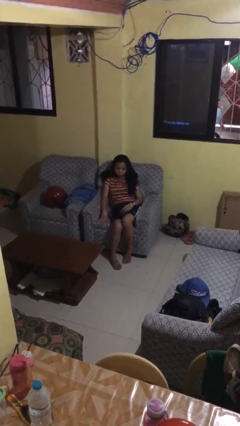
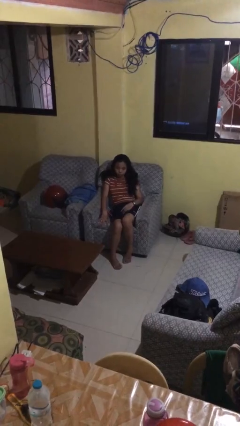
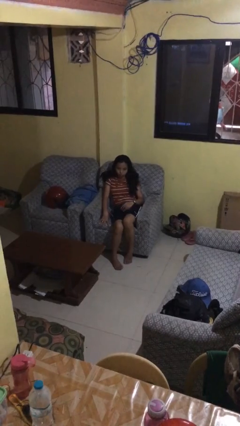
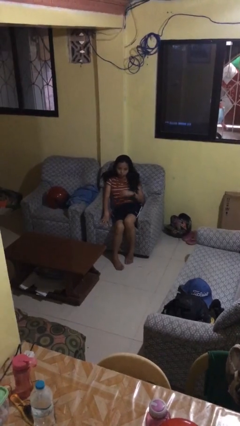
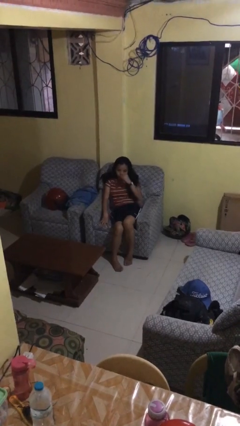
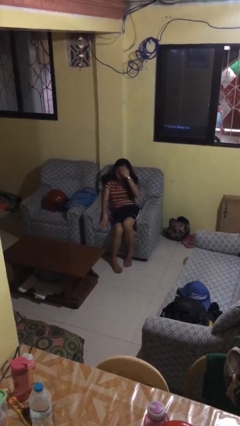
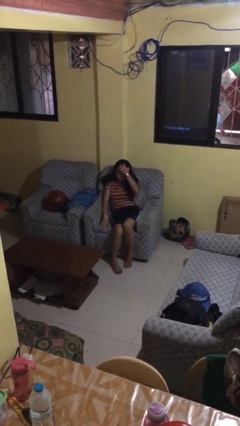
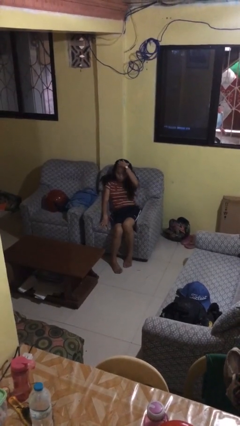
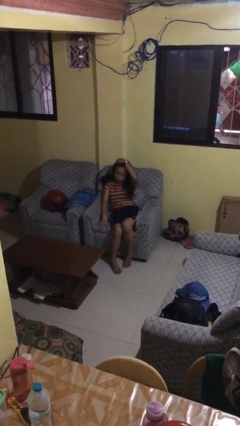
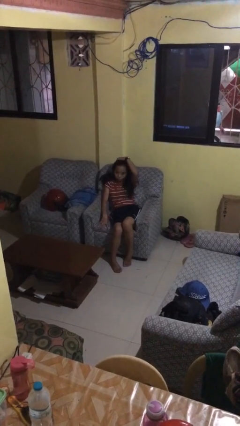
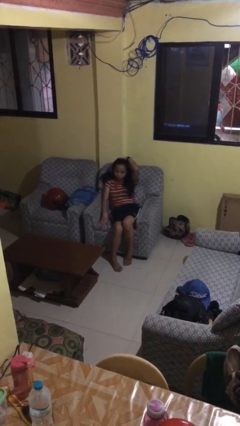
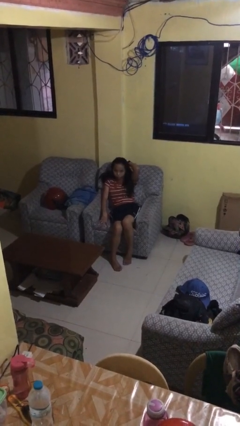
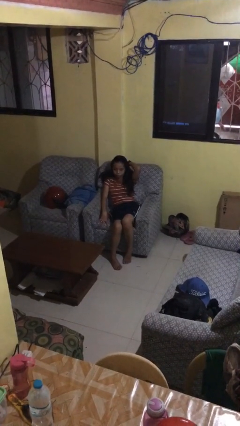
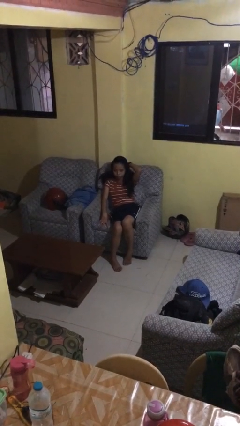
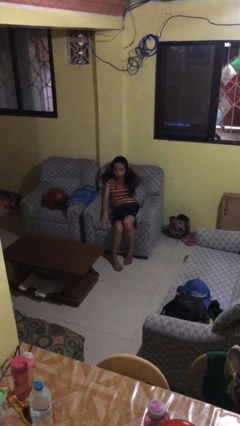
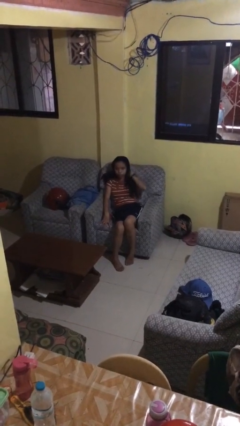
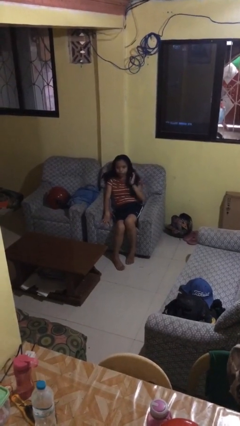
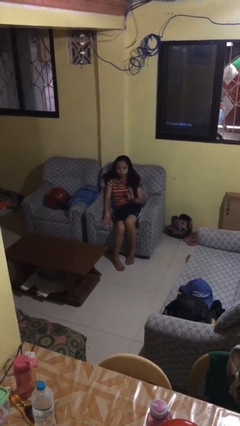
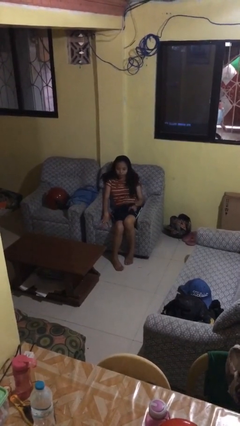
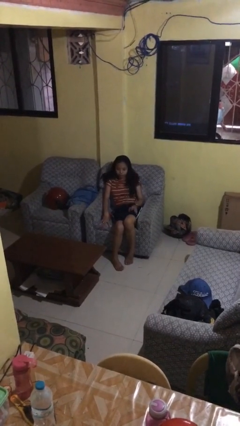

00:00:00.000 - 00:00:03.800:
person strokes hair

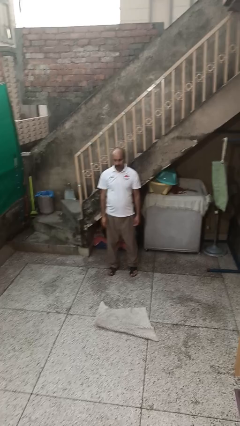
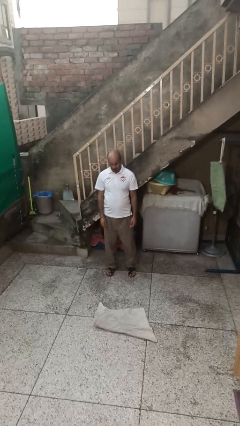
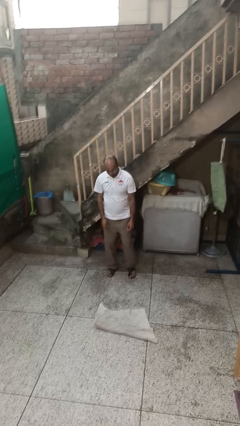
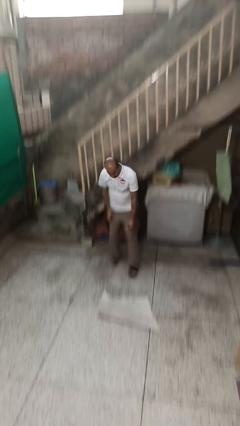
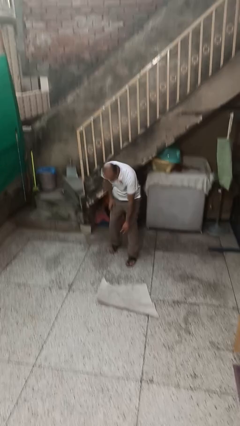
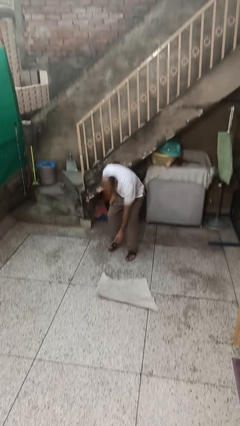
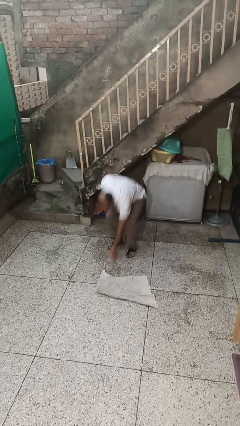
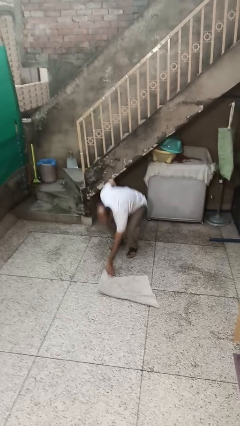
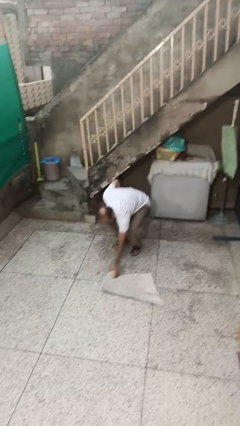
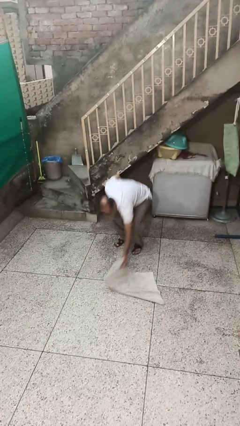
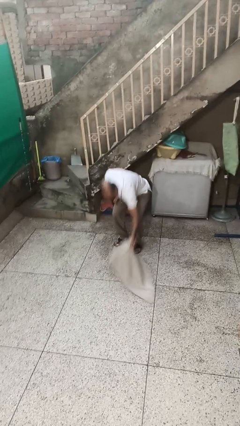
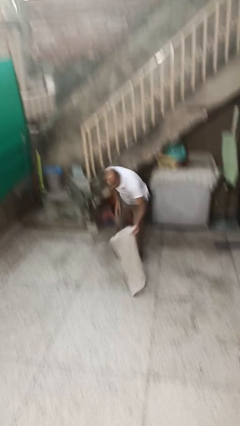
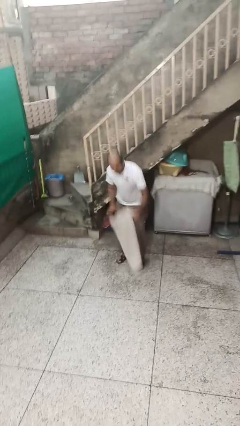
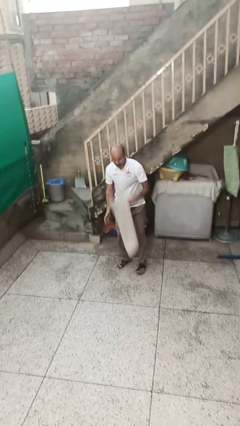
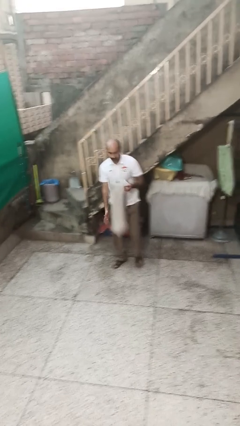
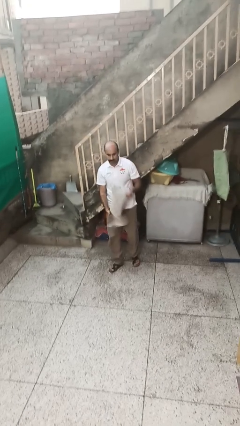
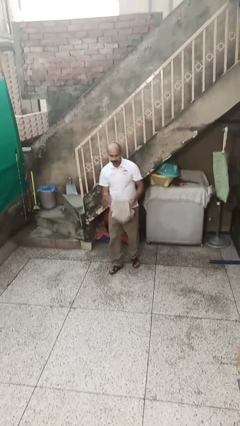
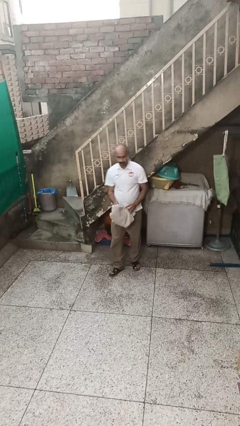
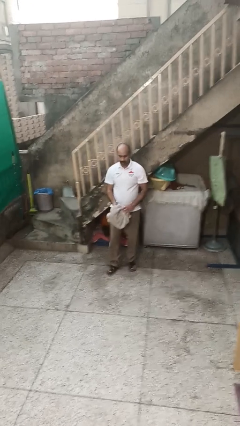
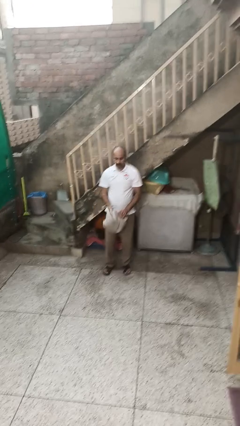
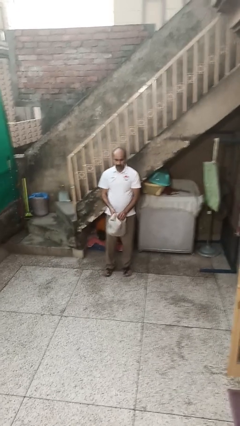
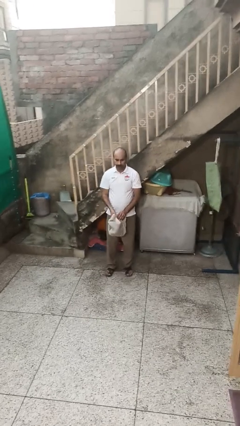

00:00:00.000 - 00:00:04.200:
person picks up object from floor

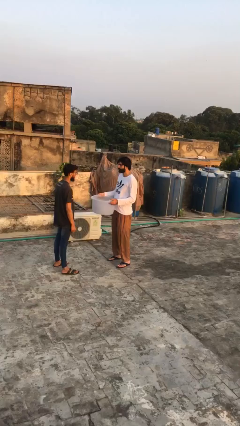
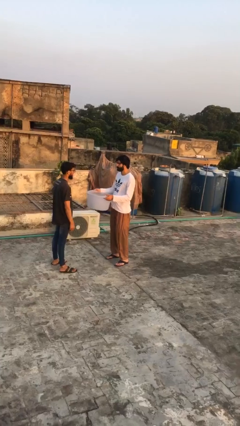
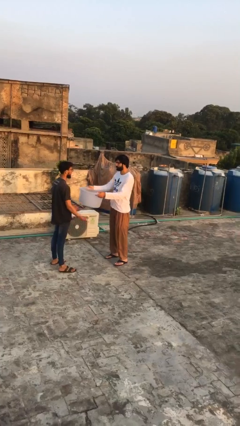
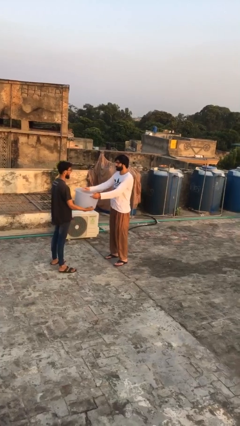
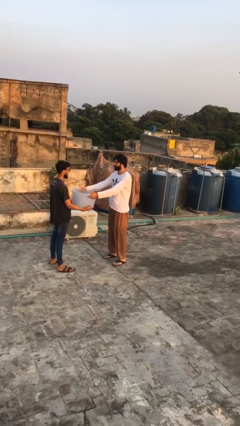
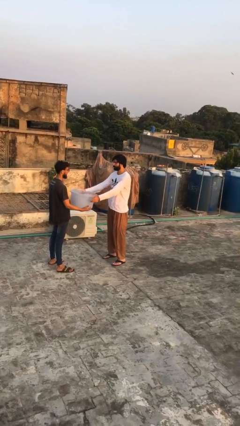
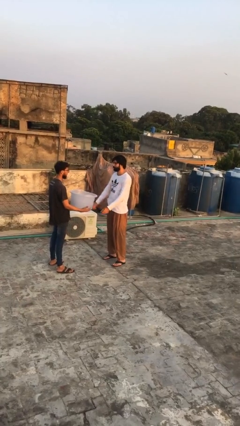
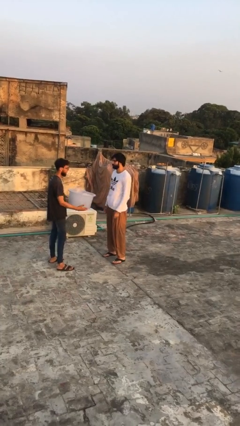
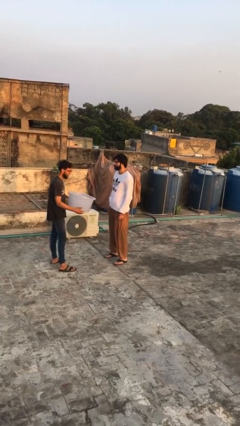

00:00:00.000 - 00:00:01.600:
person transfers object to person

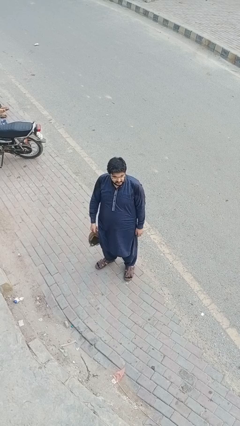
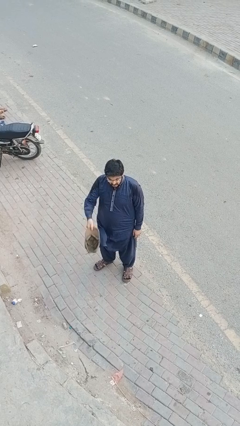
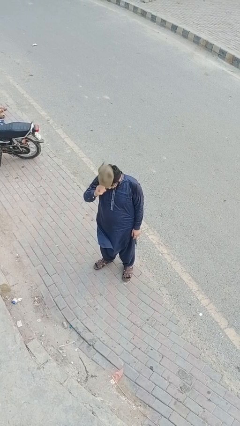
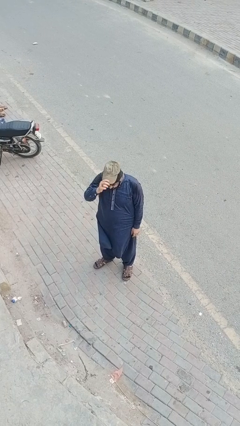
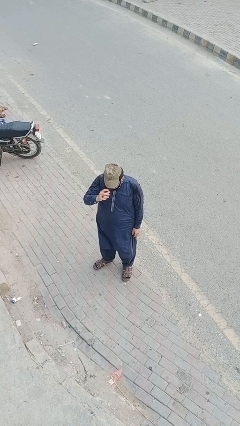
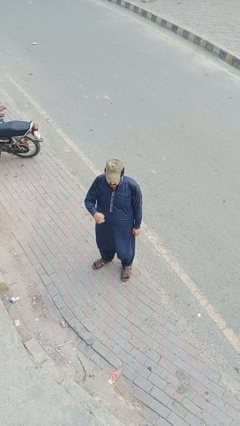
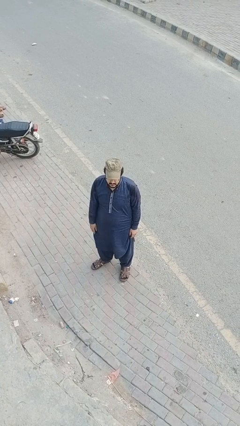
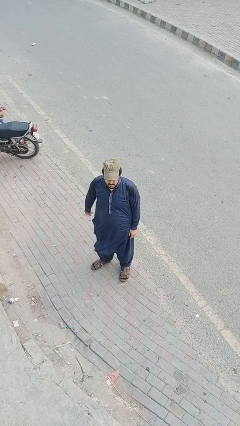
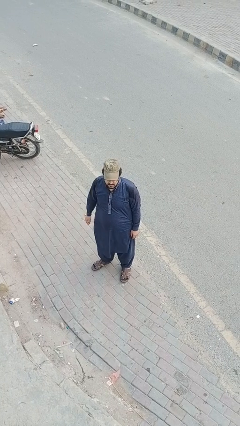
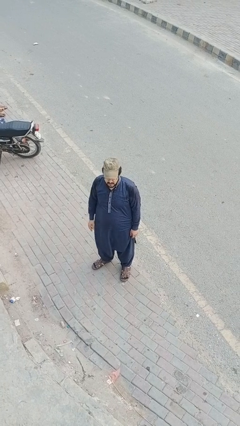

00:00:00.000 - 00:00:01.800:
person puts on hat

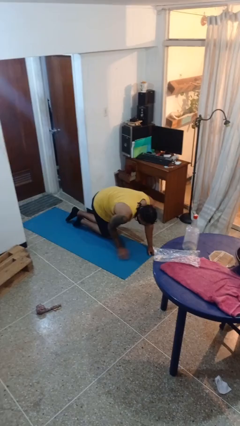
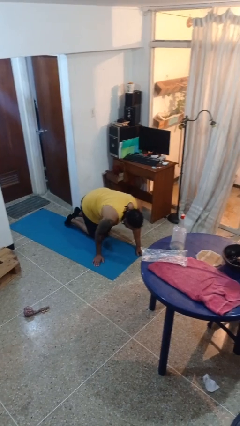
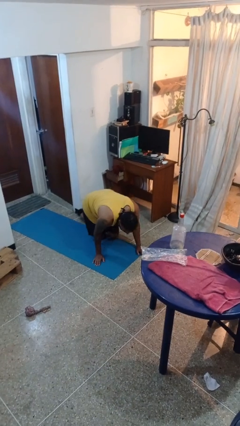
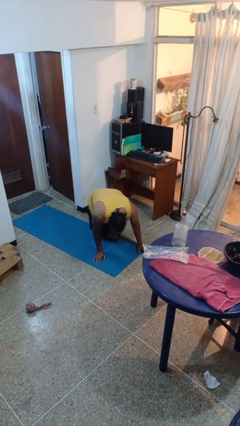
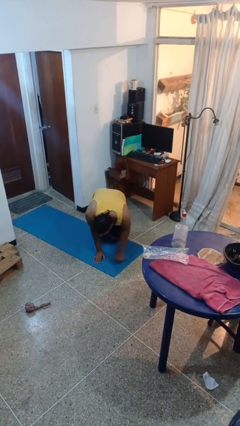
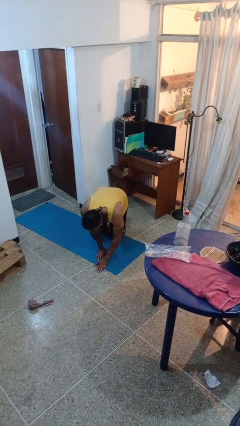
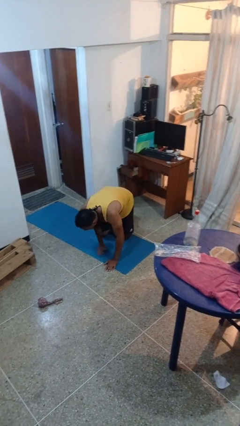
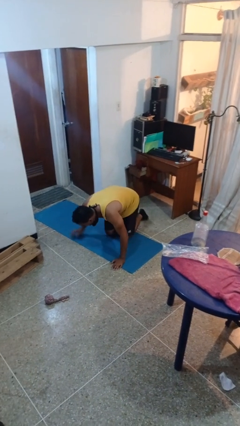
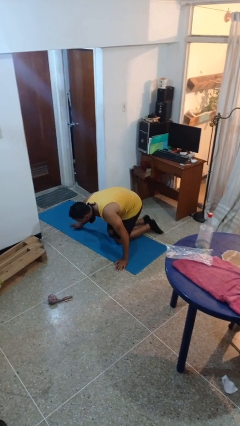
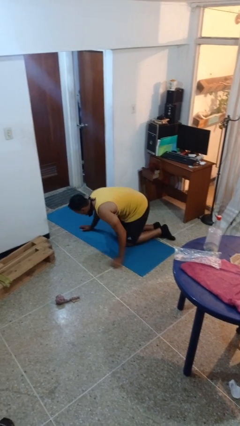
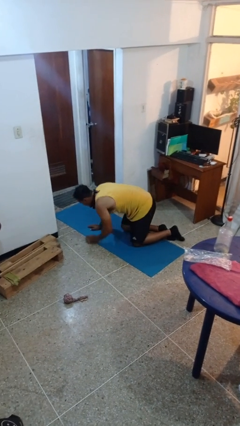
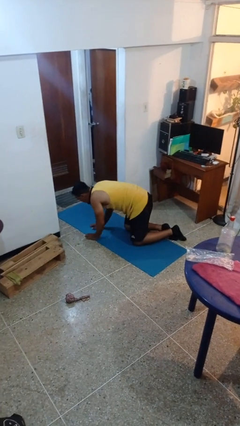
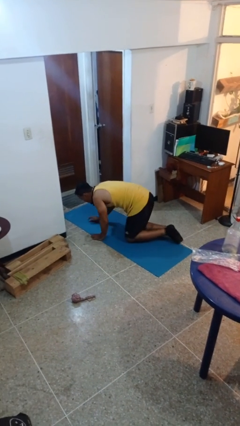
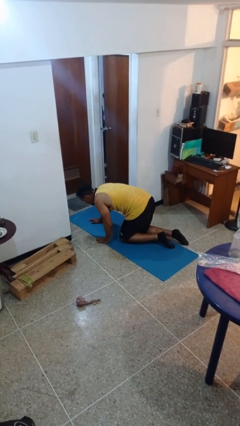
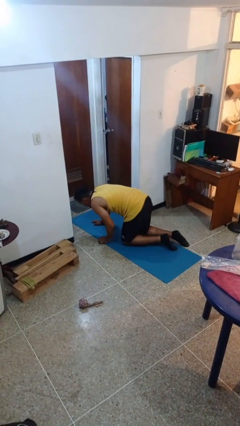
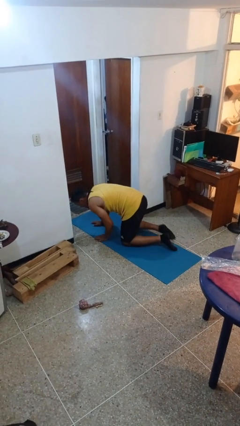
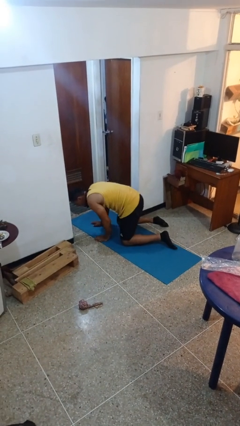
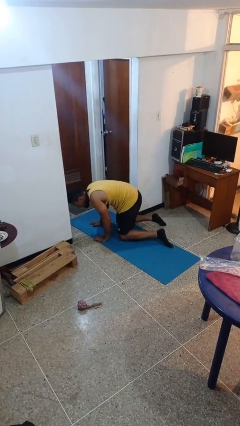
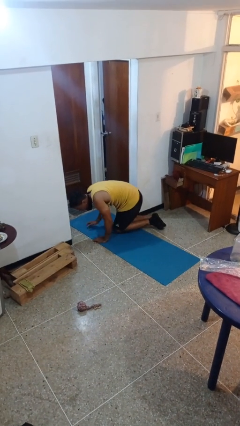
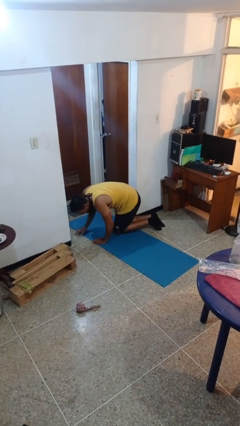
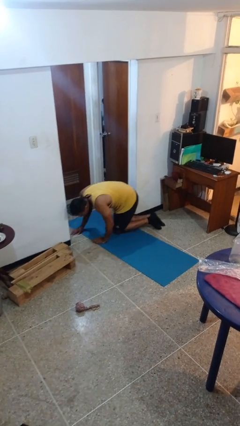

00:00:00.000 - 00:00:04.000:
person crawls

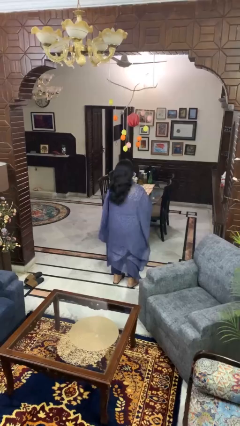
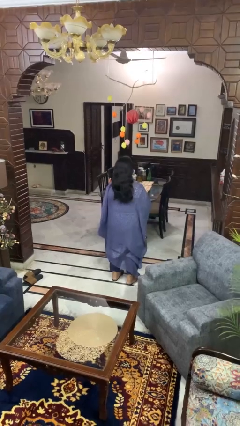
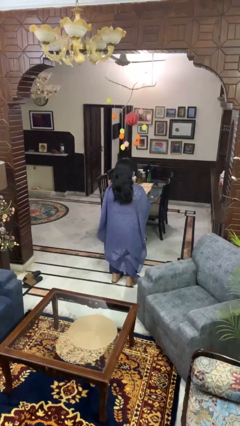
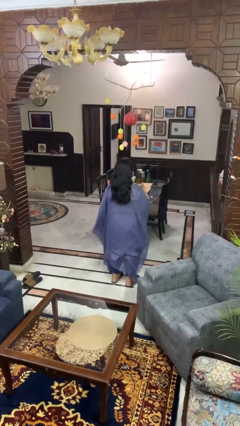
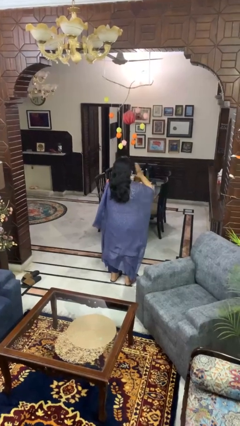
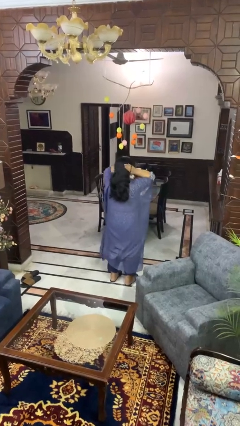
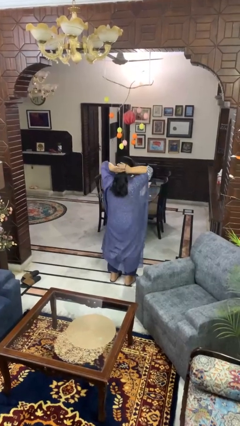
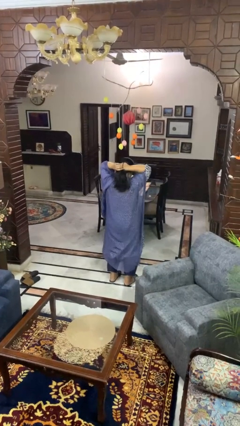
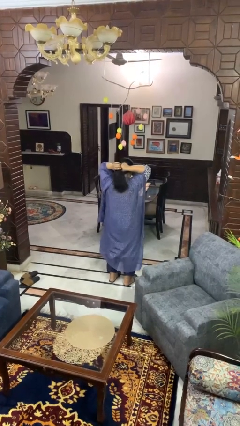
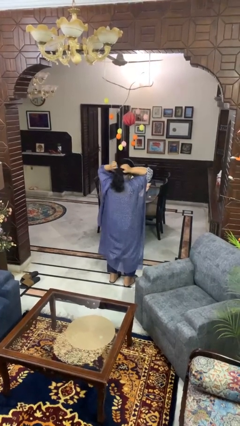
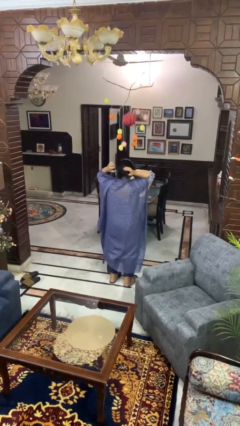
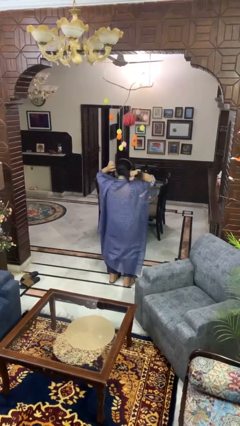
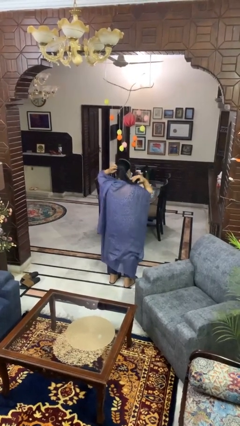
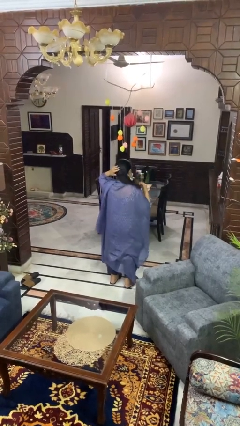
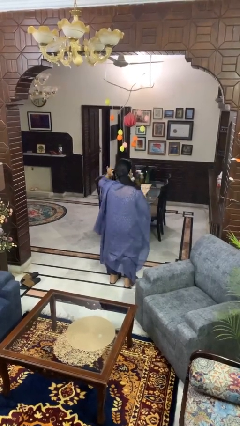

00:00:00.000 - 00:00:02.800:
person puts hair in ponytail
